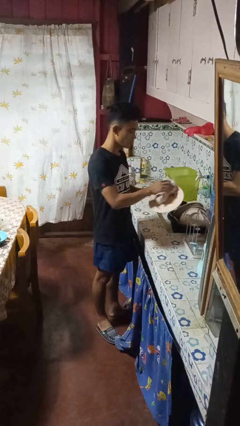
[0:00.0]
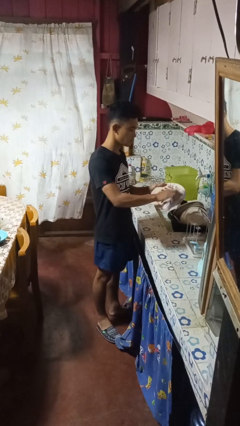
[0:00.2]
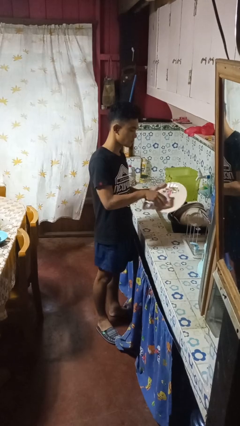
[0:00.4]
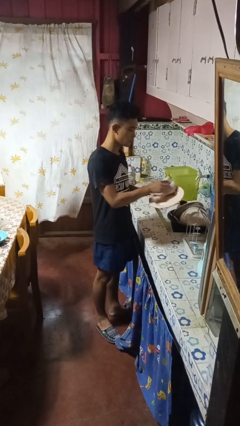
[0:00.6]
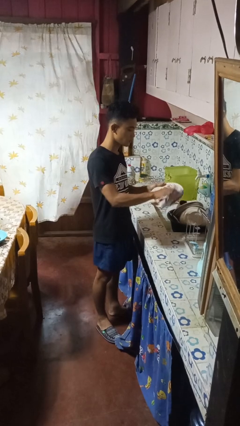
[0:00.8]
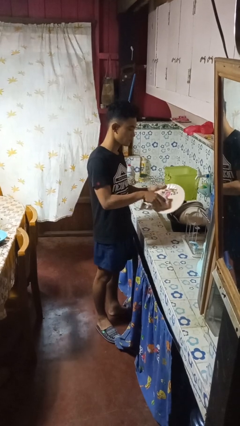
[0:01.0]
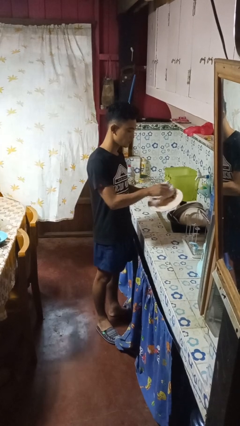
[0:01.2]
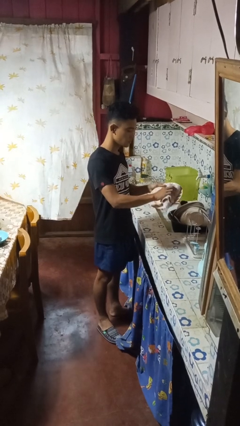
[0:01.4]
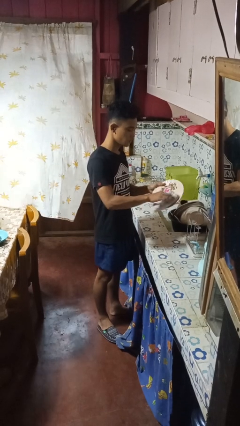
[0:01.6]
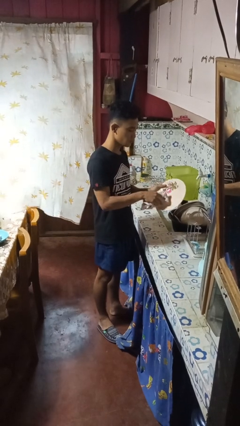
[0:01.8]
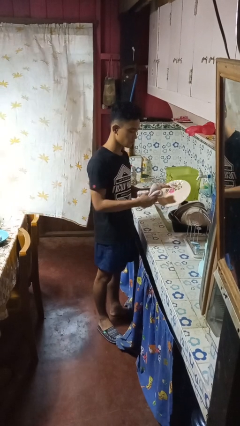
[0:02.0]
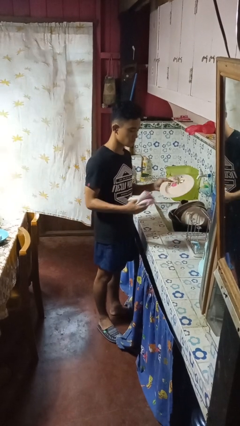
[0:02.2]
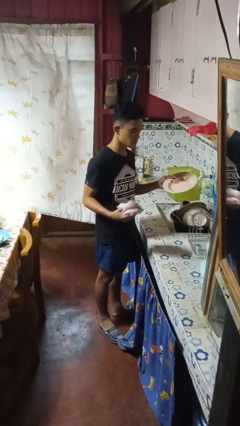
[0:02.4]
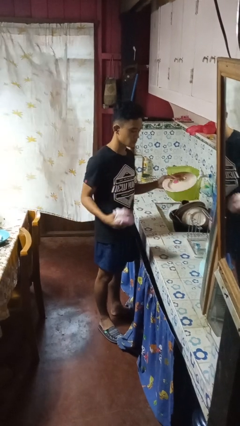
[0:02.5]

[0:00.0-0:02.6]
person dries dish

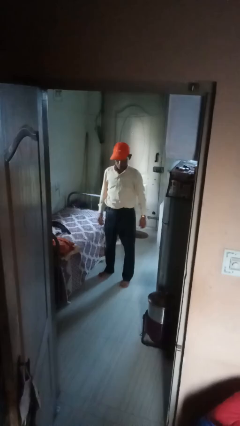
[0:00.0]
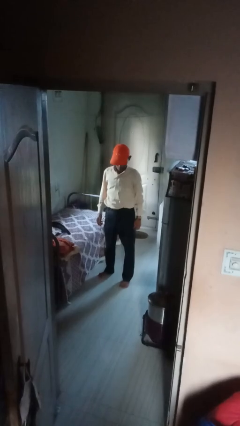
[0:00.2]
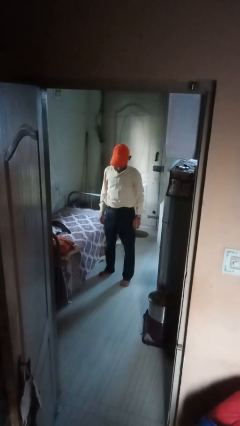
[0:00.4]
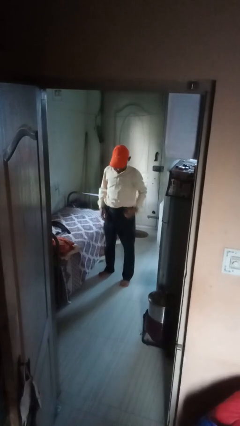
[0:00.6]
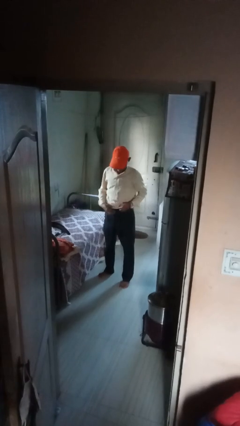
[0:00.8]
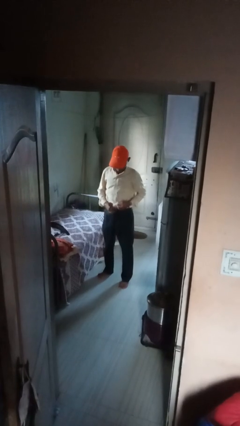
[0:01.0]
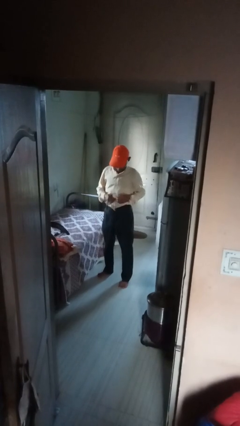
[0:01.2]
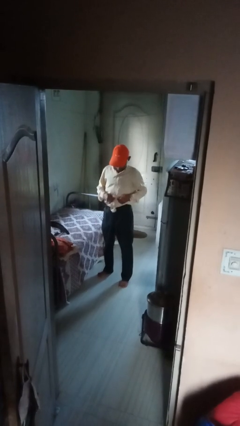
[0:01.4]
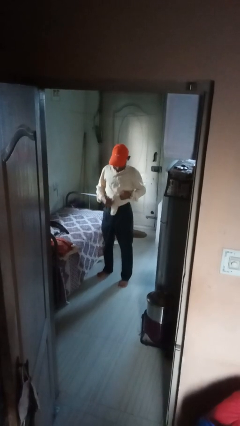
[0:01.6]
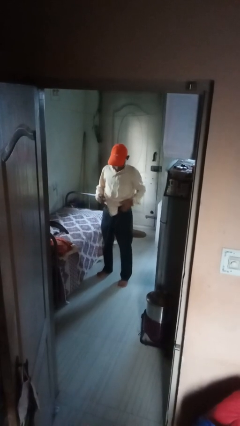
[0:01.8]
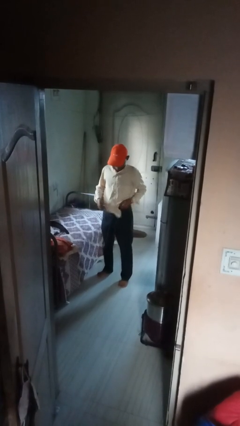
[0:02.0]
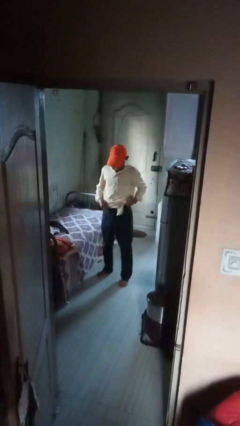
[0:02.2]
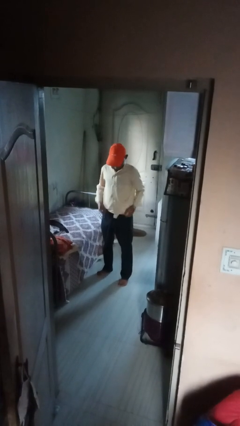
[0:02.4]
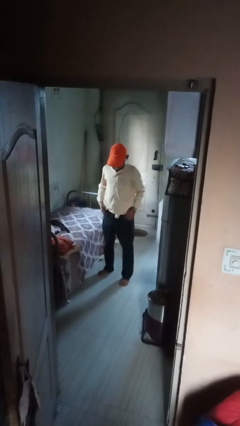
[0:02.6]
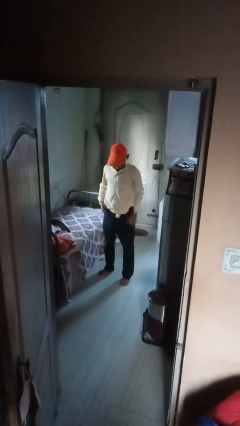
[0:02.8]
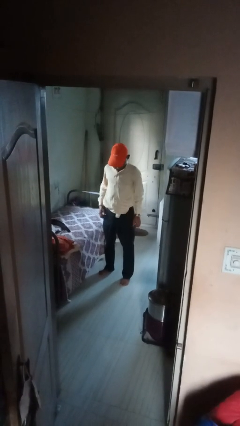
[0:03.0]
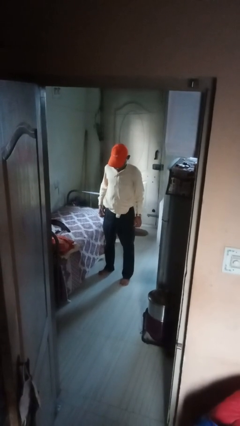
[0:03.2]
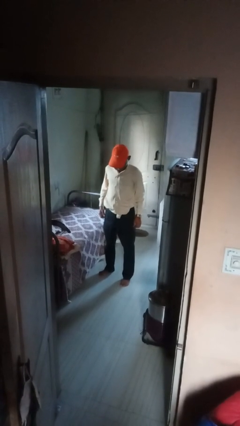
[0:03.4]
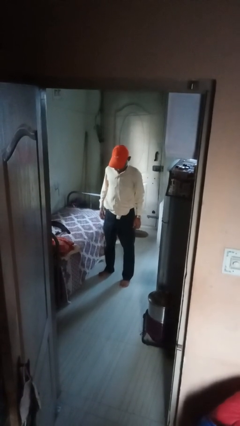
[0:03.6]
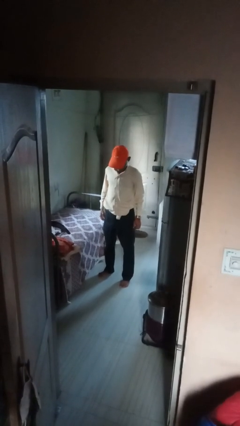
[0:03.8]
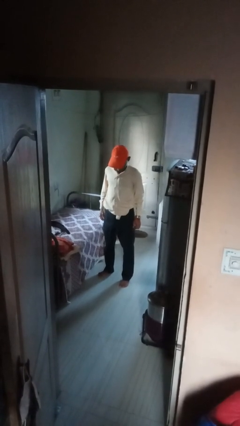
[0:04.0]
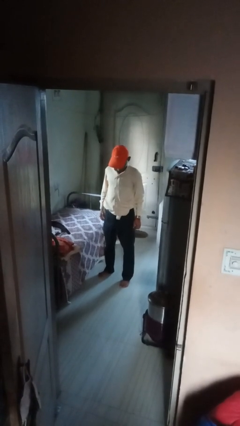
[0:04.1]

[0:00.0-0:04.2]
person untucks shirt

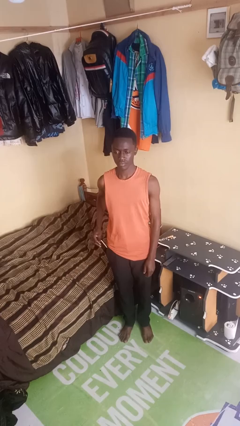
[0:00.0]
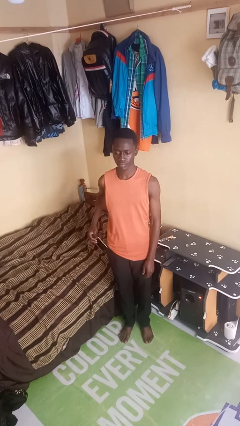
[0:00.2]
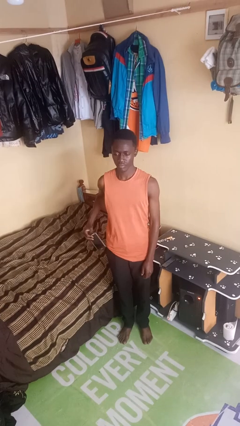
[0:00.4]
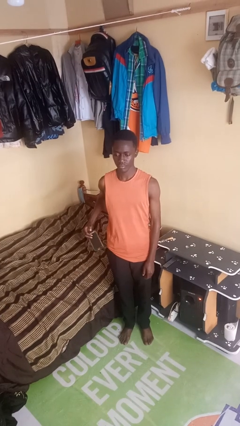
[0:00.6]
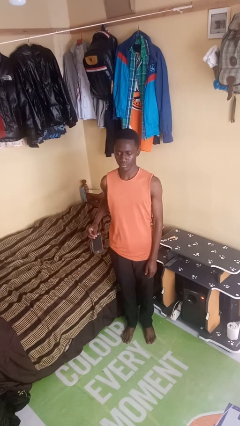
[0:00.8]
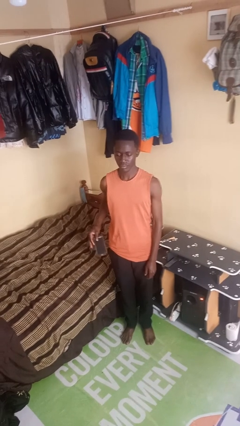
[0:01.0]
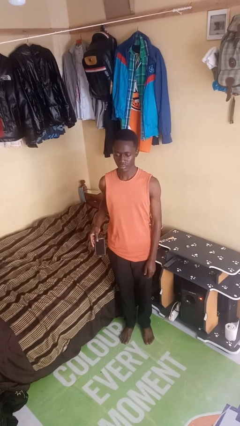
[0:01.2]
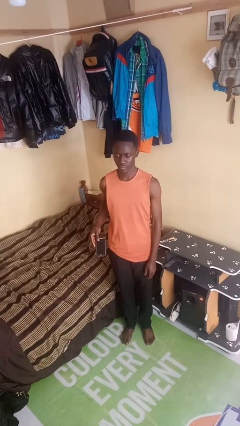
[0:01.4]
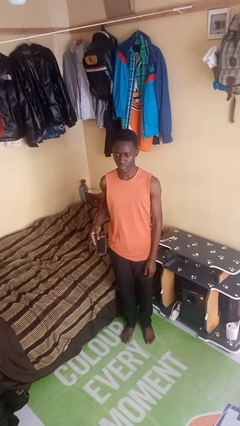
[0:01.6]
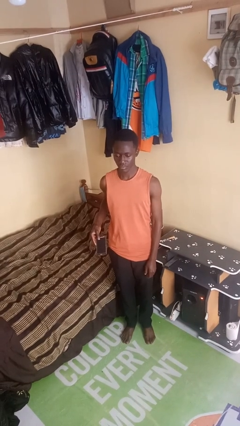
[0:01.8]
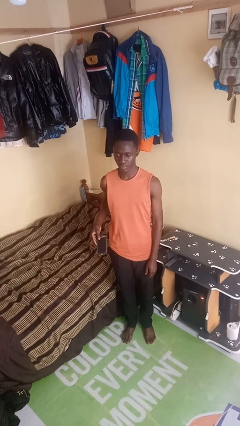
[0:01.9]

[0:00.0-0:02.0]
person takes phone from pocket

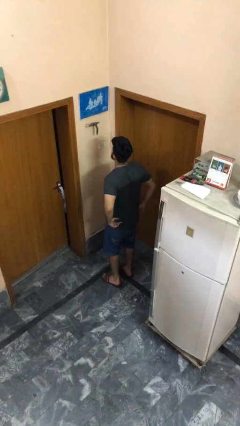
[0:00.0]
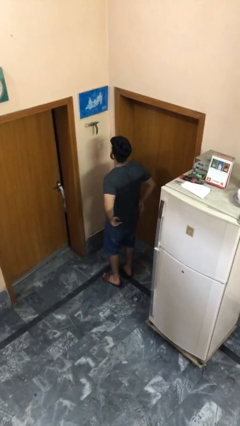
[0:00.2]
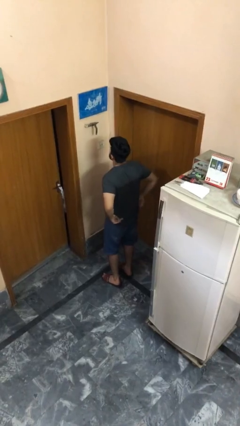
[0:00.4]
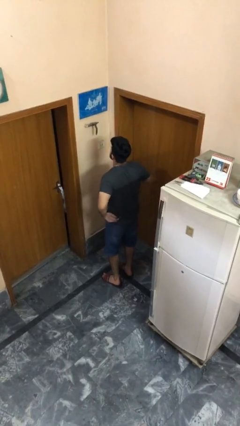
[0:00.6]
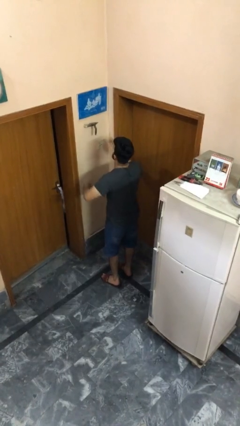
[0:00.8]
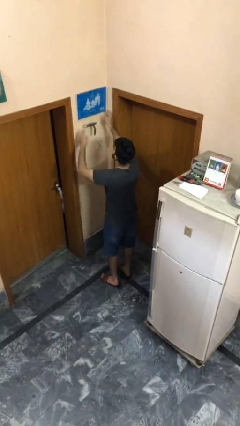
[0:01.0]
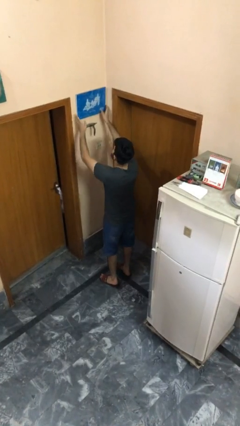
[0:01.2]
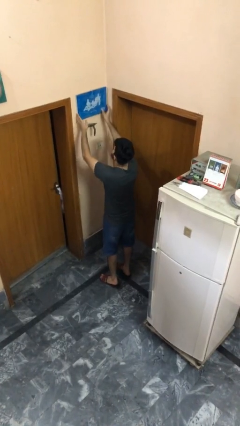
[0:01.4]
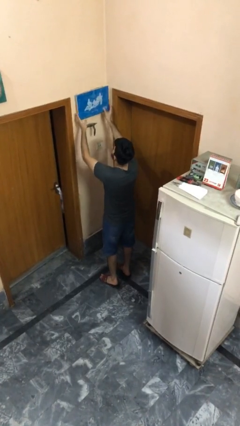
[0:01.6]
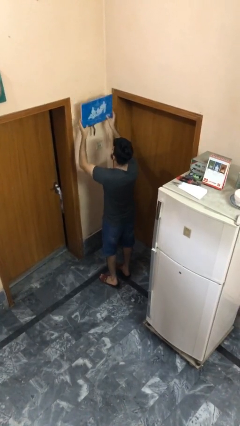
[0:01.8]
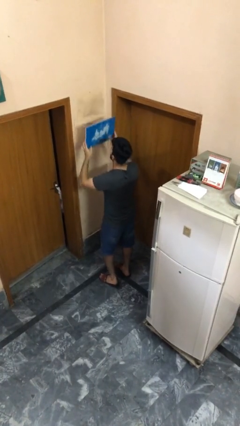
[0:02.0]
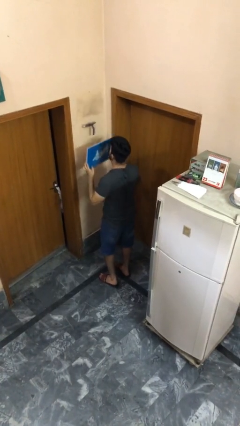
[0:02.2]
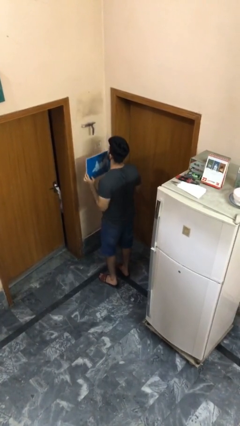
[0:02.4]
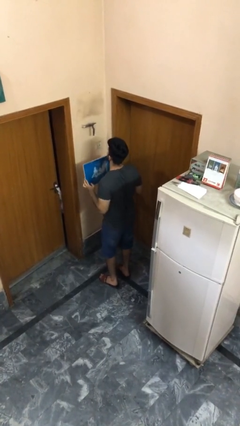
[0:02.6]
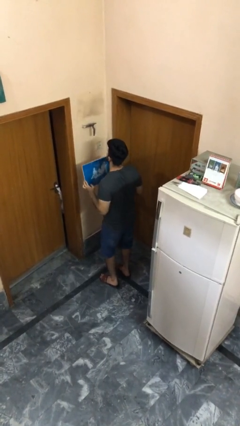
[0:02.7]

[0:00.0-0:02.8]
person takes down picture frame

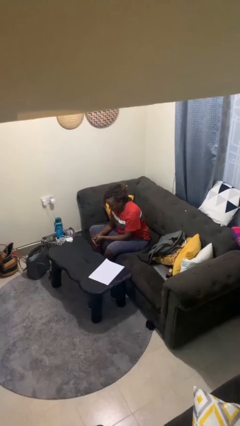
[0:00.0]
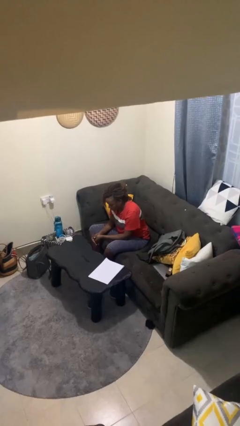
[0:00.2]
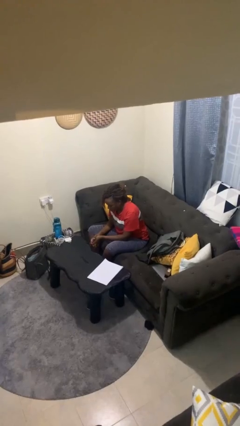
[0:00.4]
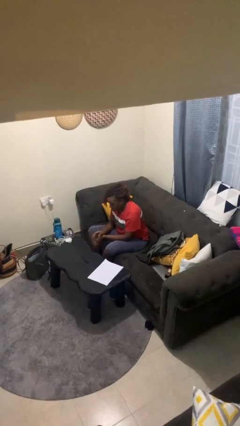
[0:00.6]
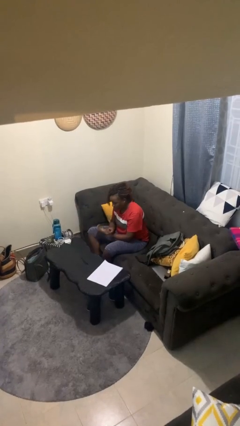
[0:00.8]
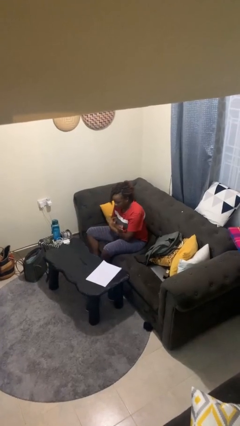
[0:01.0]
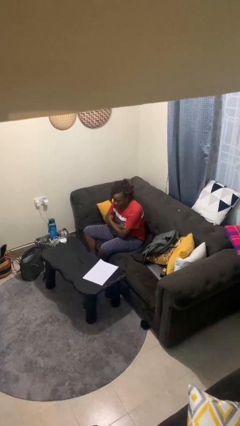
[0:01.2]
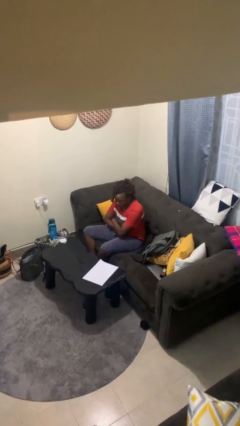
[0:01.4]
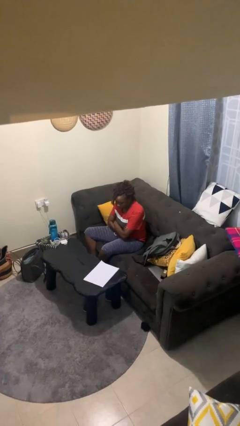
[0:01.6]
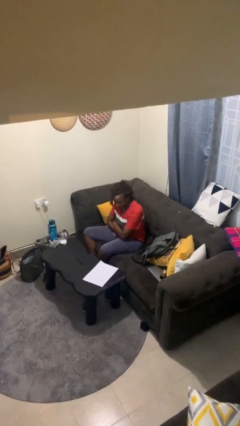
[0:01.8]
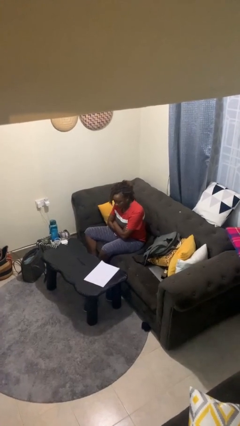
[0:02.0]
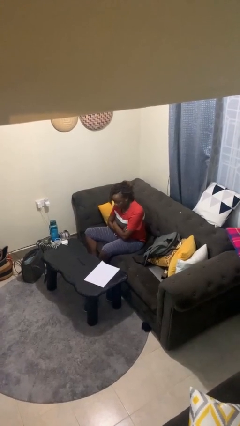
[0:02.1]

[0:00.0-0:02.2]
person crosses arms

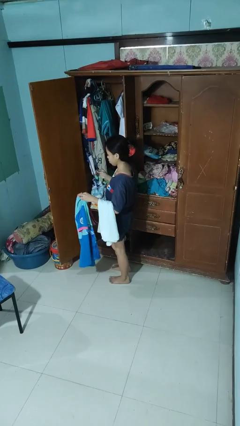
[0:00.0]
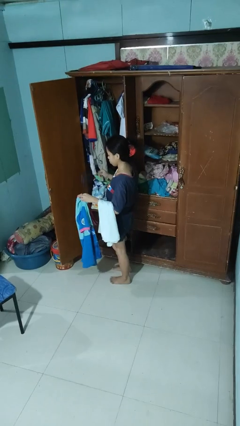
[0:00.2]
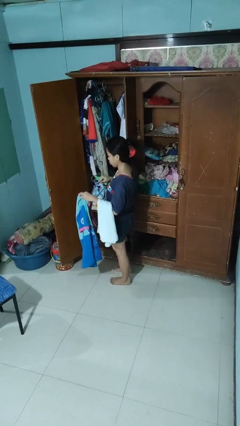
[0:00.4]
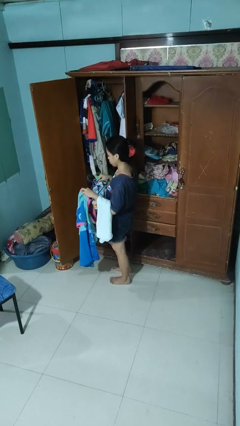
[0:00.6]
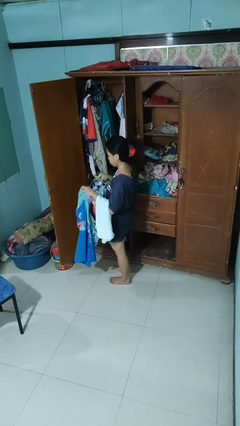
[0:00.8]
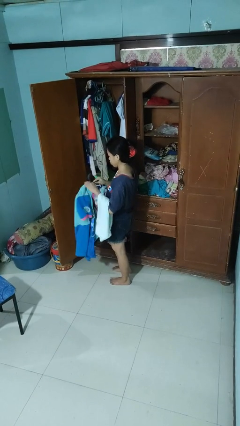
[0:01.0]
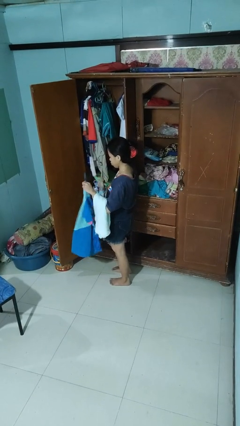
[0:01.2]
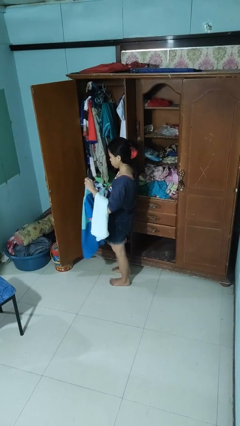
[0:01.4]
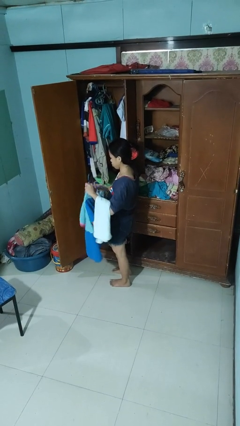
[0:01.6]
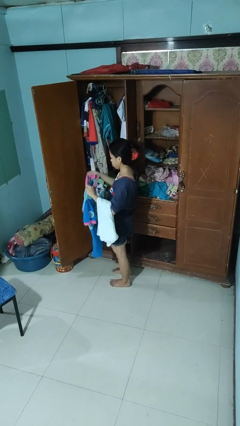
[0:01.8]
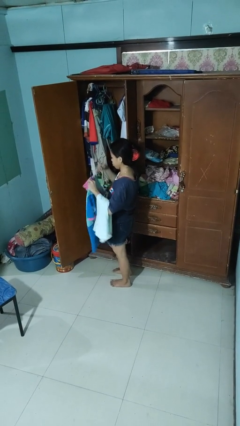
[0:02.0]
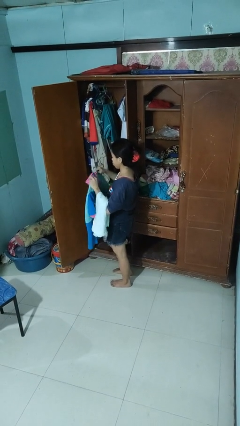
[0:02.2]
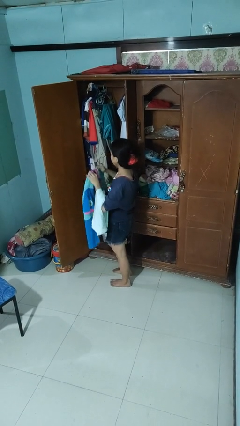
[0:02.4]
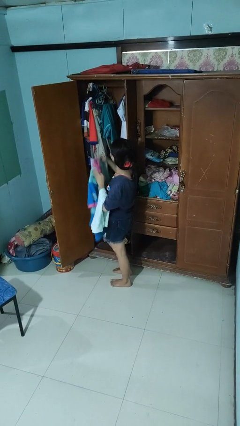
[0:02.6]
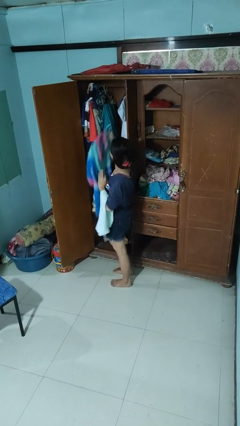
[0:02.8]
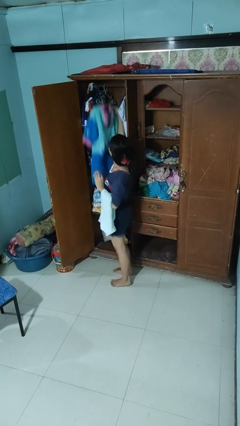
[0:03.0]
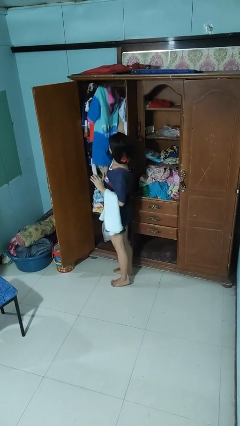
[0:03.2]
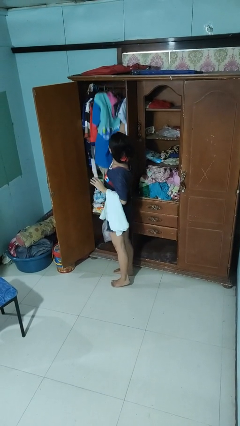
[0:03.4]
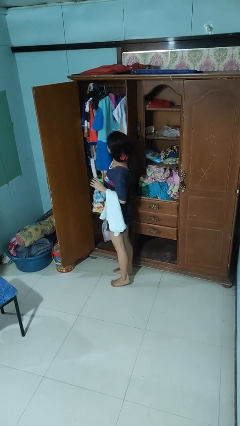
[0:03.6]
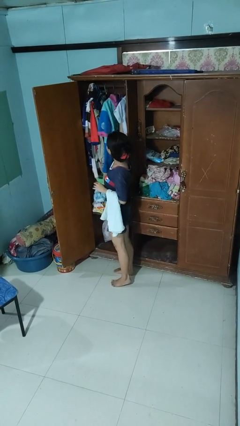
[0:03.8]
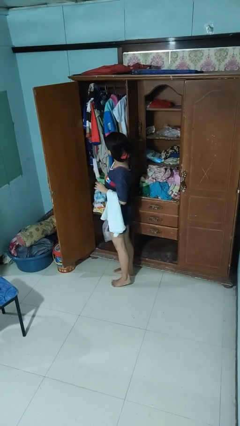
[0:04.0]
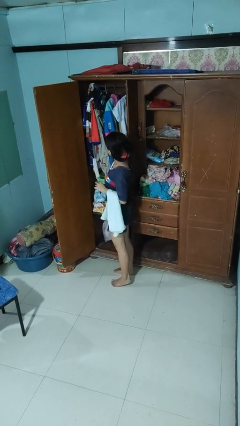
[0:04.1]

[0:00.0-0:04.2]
person puts clothes into closet
